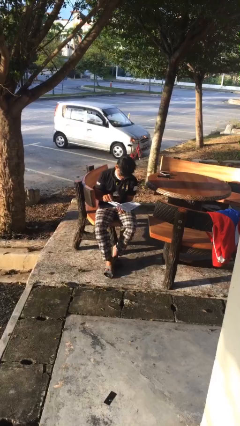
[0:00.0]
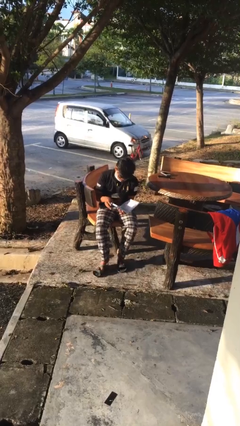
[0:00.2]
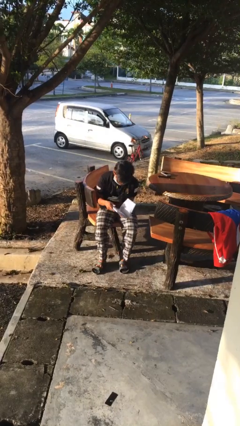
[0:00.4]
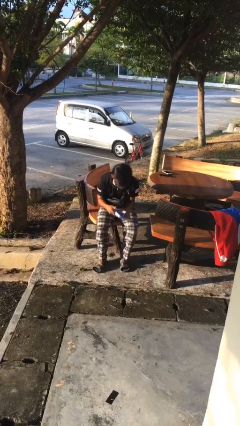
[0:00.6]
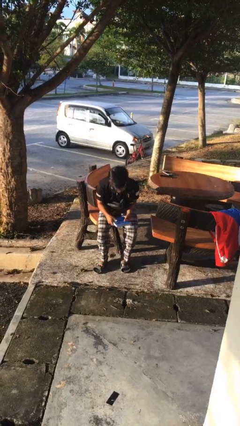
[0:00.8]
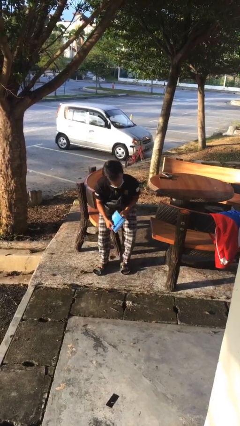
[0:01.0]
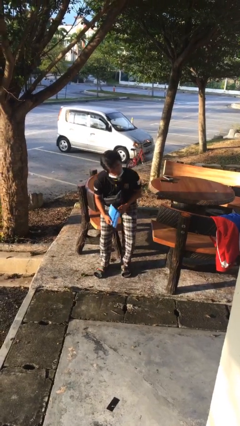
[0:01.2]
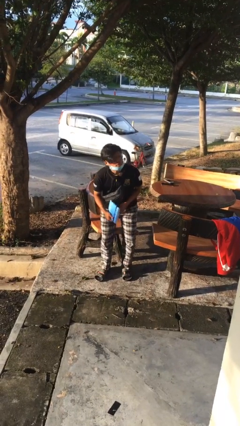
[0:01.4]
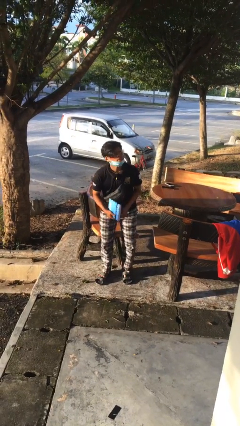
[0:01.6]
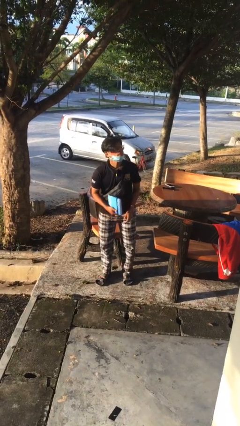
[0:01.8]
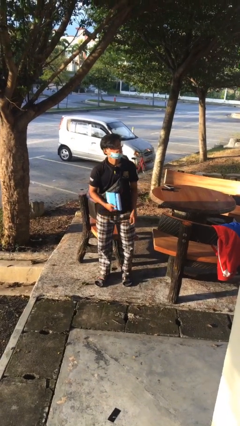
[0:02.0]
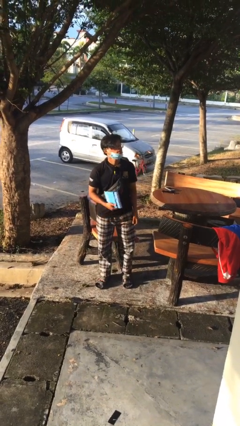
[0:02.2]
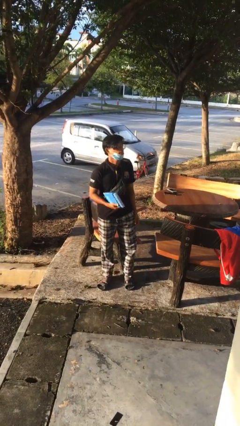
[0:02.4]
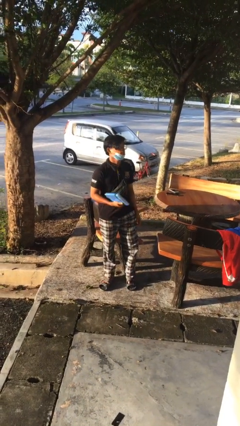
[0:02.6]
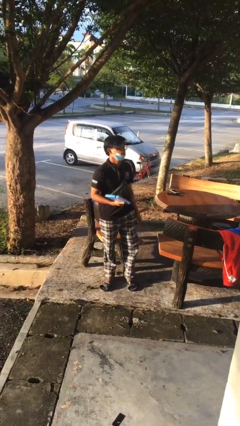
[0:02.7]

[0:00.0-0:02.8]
person stands up

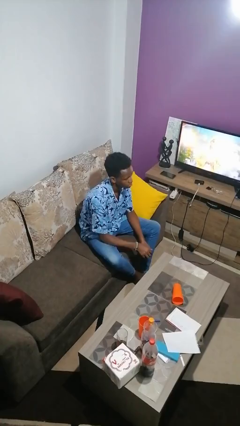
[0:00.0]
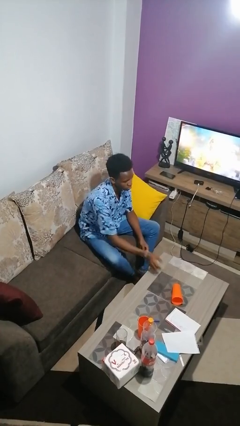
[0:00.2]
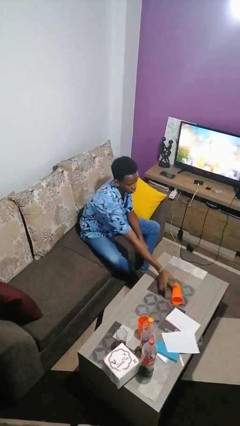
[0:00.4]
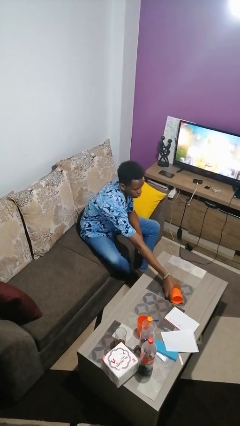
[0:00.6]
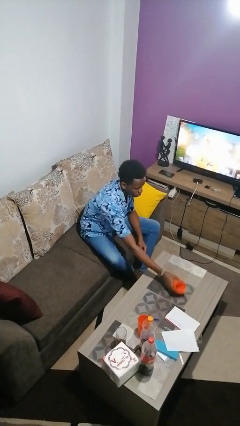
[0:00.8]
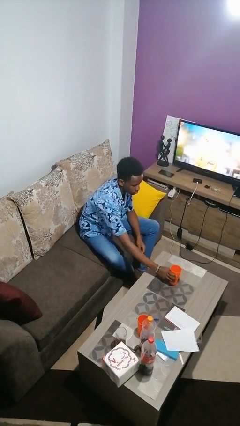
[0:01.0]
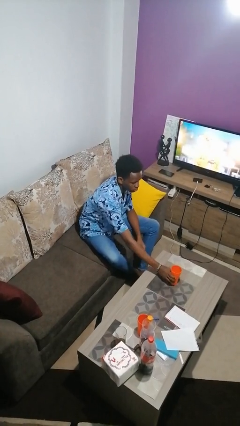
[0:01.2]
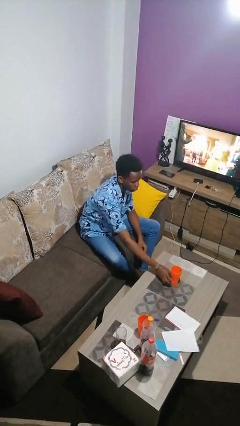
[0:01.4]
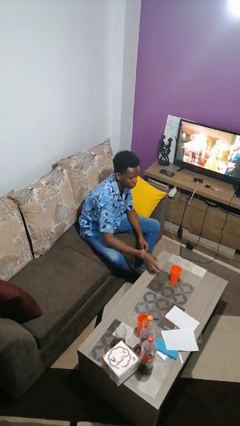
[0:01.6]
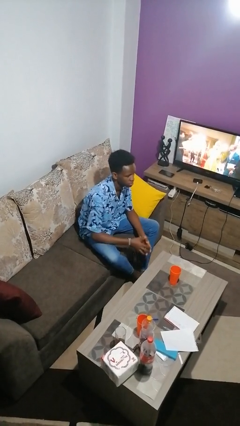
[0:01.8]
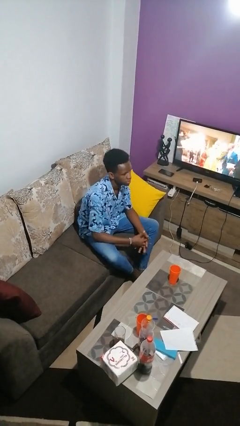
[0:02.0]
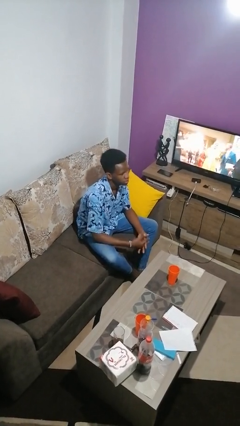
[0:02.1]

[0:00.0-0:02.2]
person sets upright glass

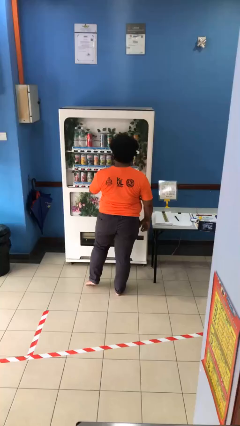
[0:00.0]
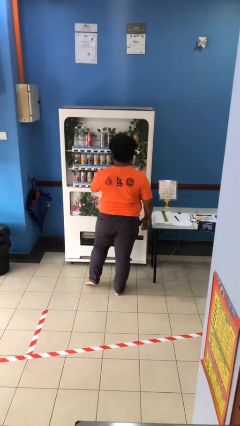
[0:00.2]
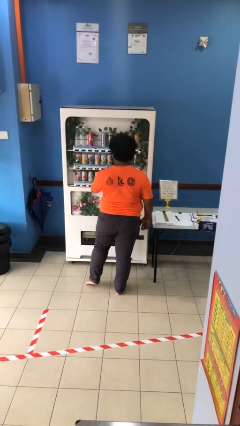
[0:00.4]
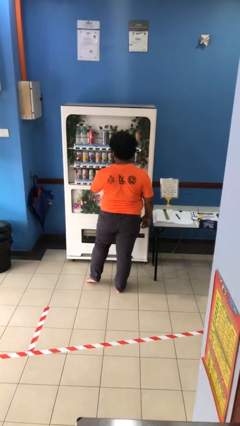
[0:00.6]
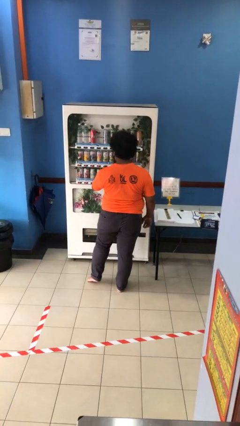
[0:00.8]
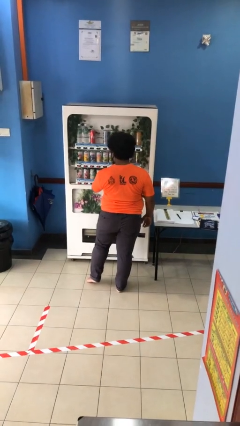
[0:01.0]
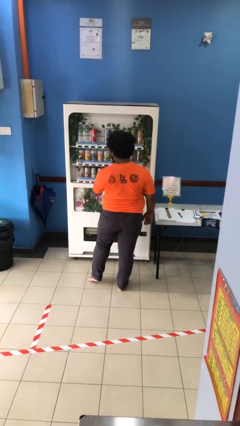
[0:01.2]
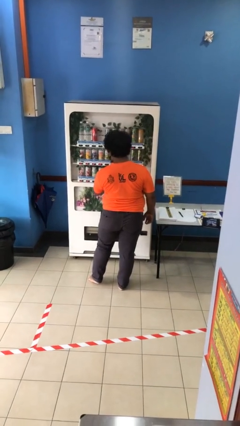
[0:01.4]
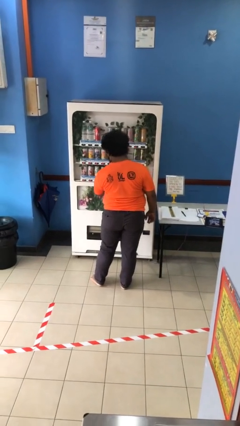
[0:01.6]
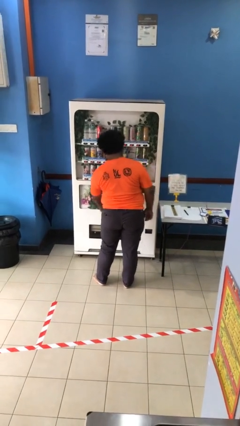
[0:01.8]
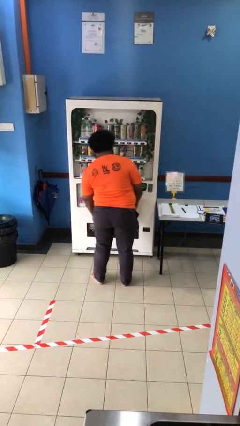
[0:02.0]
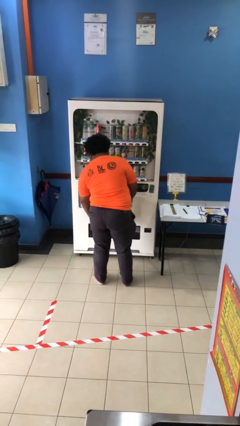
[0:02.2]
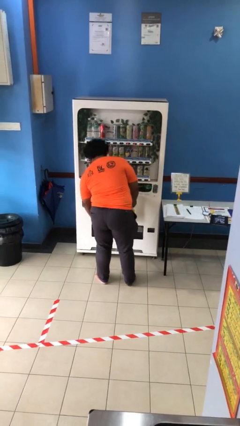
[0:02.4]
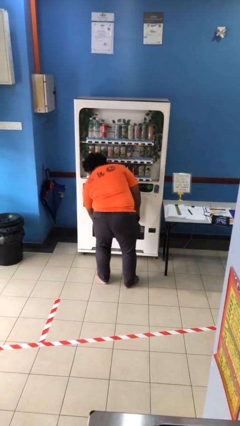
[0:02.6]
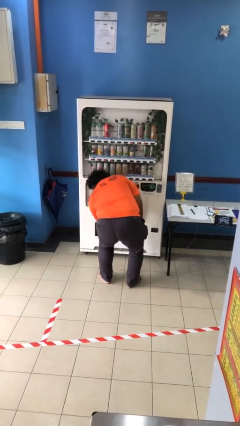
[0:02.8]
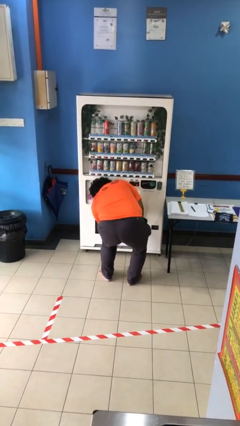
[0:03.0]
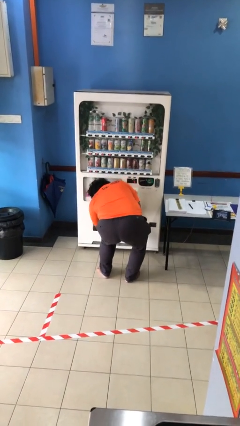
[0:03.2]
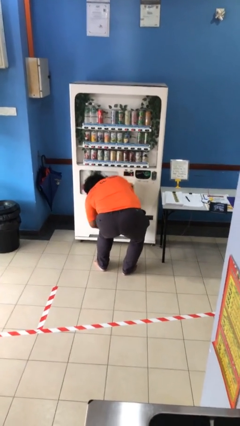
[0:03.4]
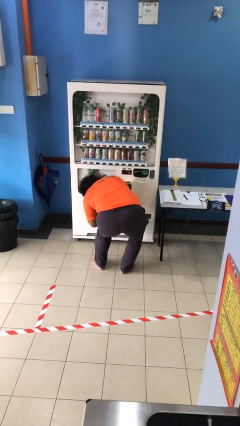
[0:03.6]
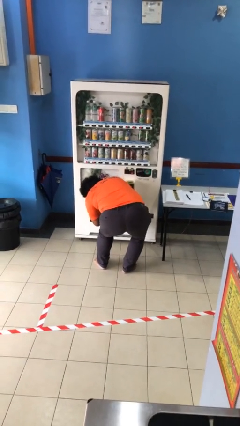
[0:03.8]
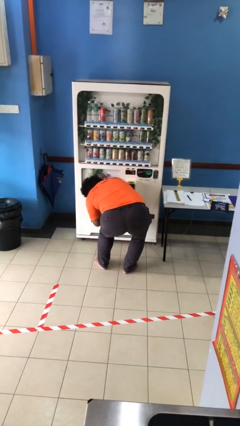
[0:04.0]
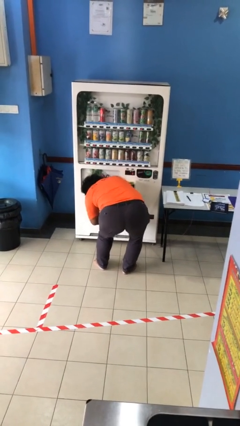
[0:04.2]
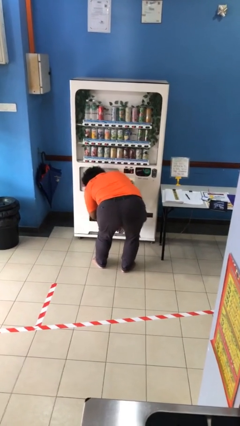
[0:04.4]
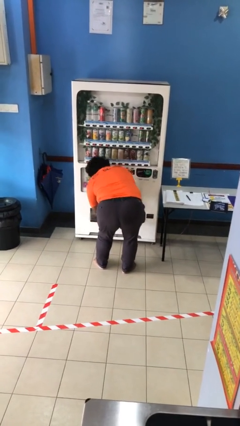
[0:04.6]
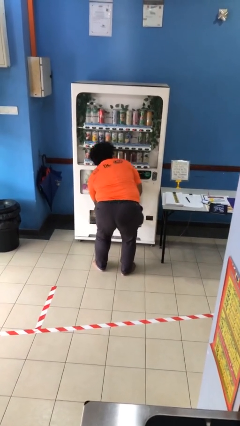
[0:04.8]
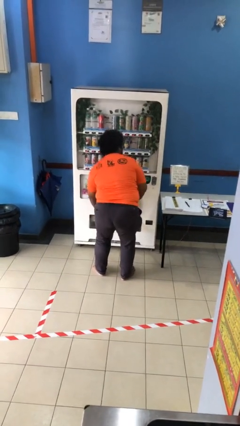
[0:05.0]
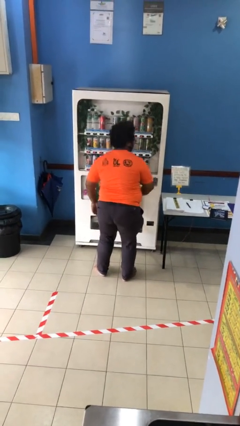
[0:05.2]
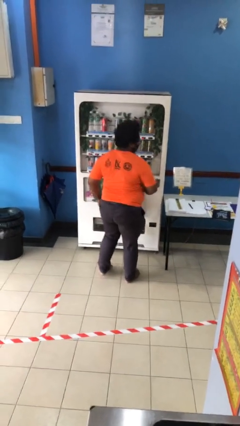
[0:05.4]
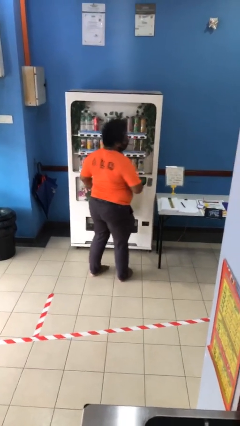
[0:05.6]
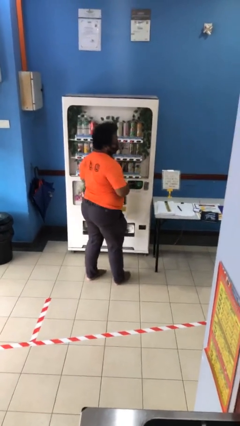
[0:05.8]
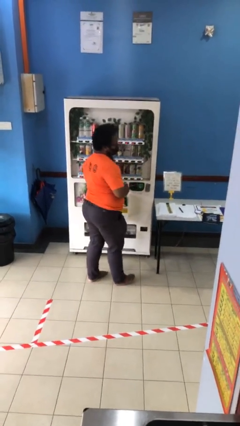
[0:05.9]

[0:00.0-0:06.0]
person purchases from machine

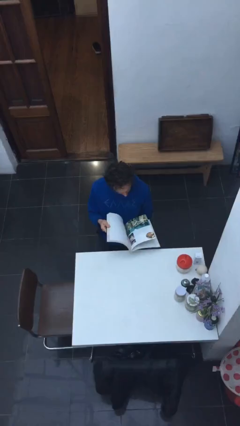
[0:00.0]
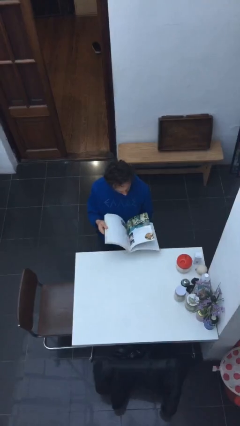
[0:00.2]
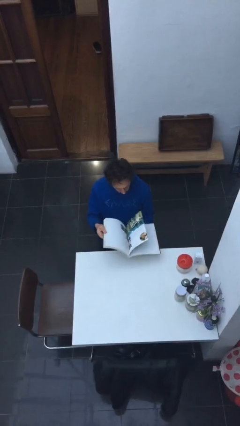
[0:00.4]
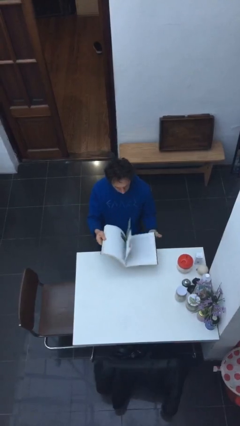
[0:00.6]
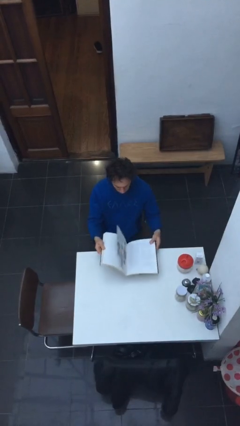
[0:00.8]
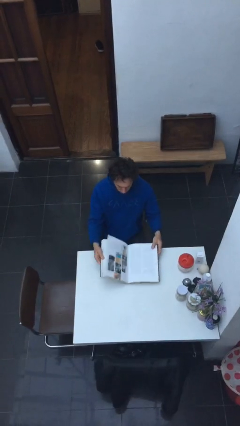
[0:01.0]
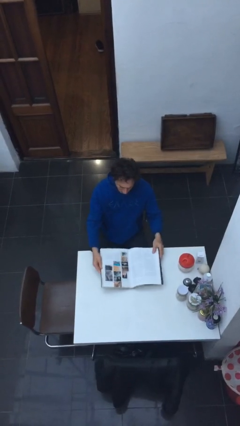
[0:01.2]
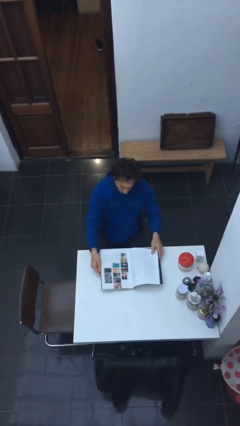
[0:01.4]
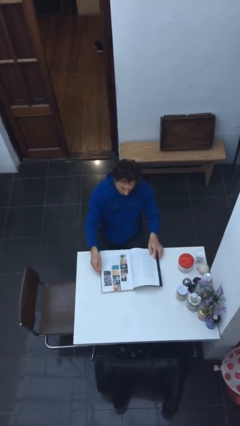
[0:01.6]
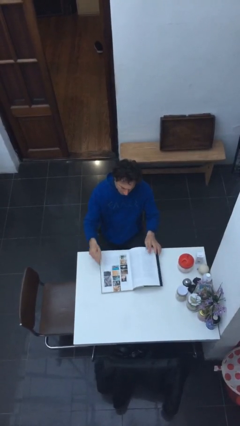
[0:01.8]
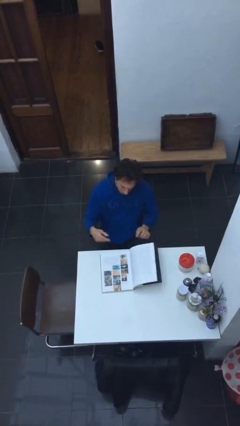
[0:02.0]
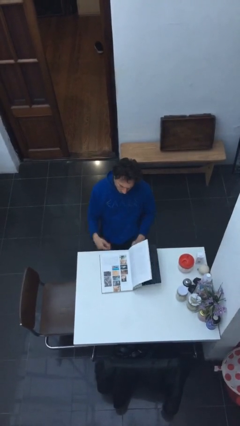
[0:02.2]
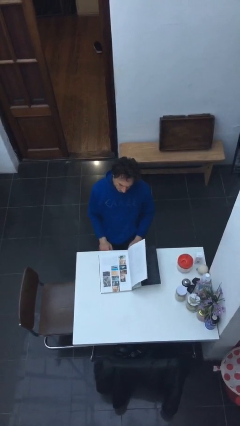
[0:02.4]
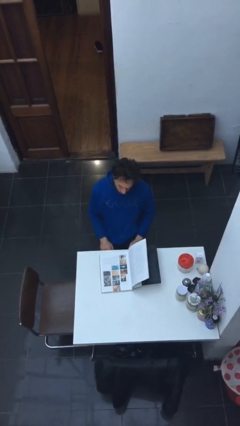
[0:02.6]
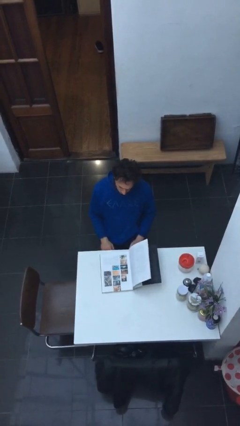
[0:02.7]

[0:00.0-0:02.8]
person puts down object on table

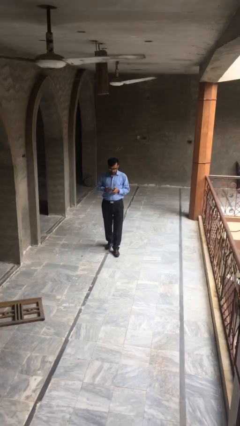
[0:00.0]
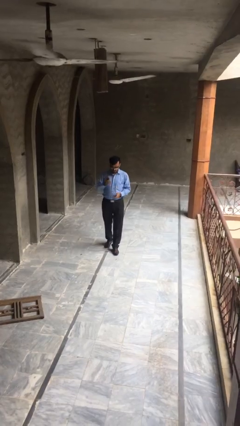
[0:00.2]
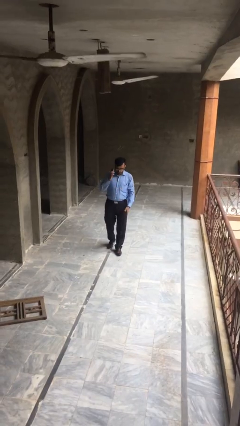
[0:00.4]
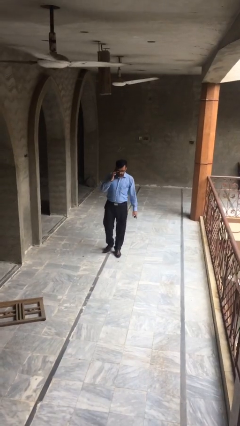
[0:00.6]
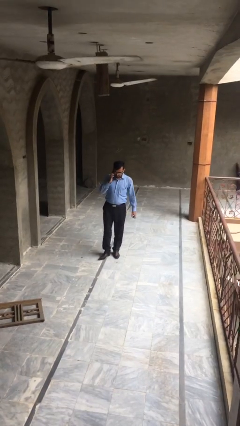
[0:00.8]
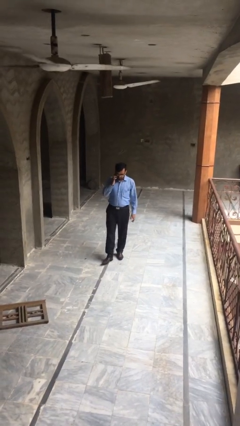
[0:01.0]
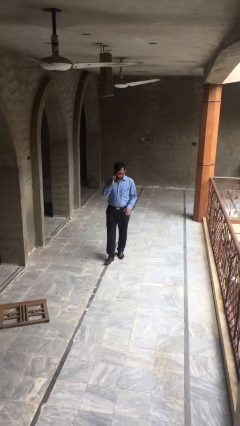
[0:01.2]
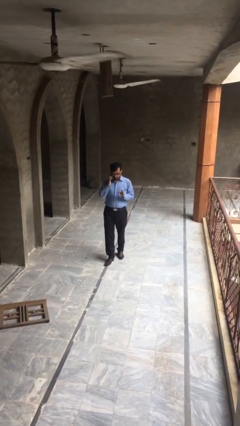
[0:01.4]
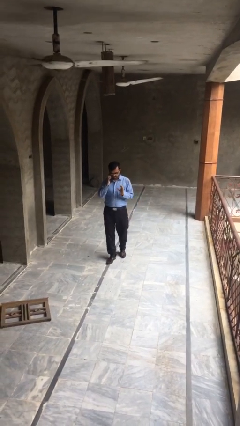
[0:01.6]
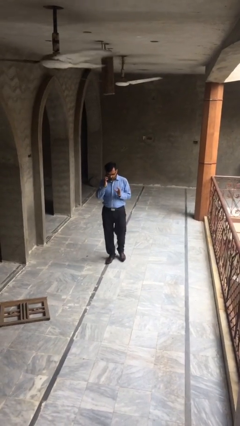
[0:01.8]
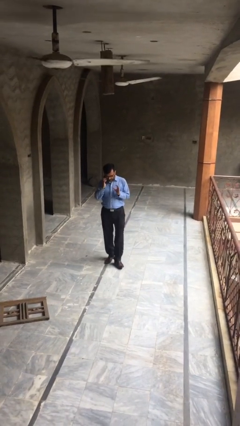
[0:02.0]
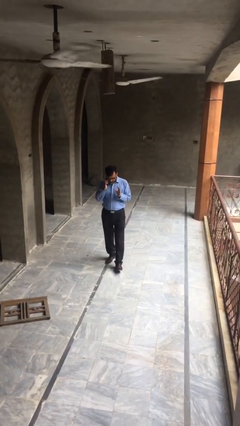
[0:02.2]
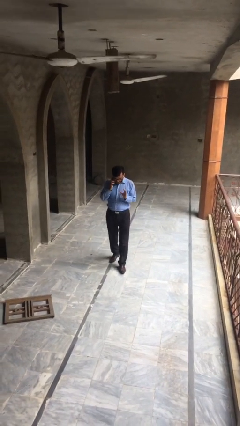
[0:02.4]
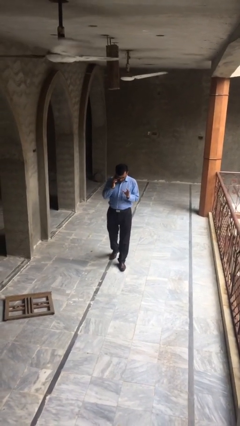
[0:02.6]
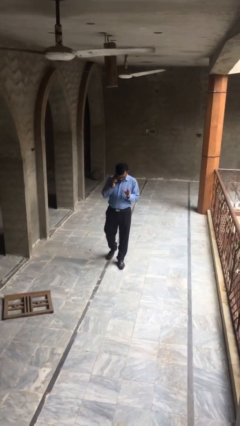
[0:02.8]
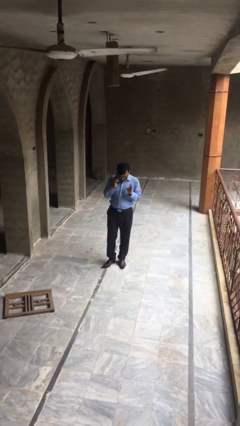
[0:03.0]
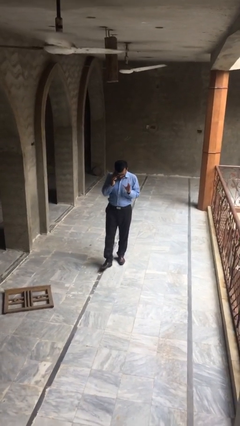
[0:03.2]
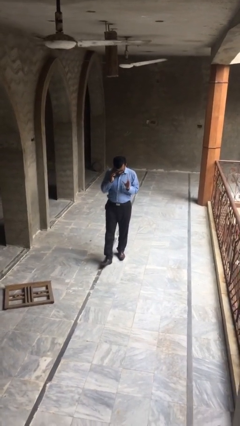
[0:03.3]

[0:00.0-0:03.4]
person talks on phone

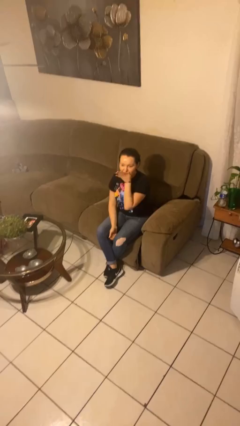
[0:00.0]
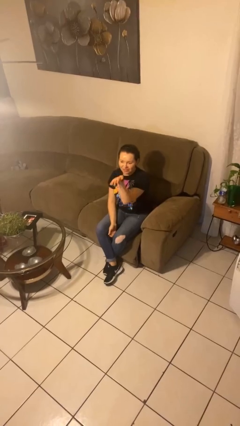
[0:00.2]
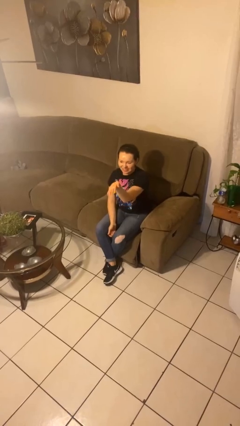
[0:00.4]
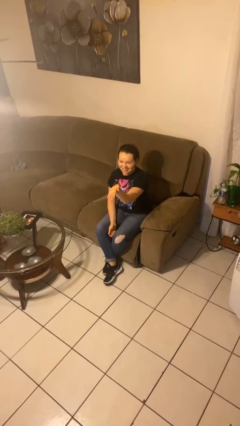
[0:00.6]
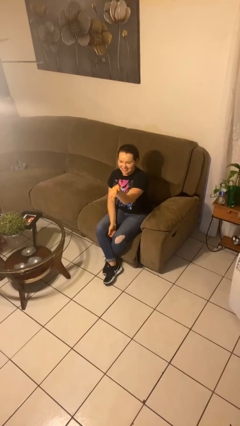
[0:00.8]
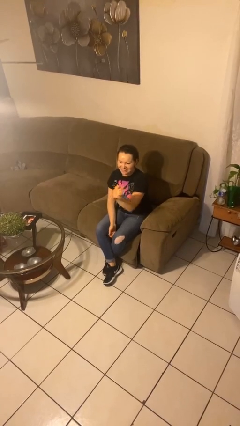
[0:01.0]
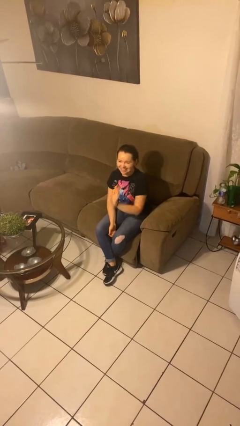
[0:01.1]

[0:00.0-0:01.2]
person gestures blow kiss
